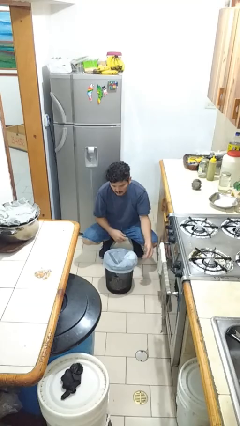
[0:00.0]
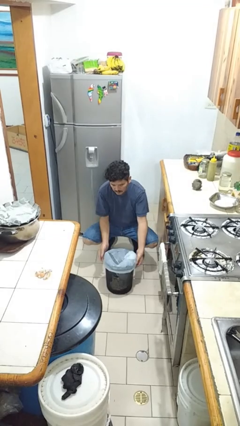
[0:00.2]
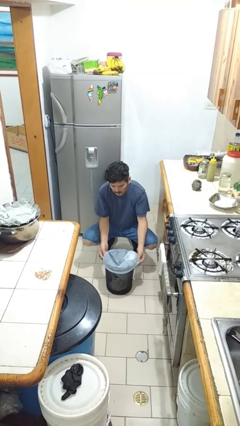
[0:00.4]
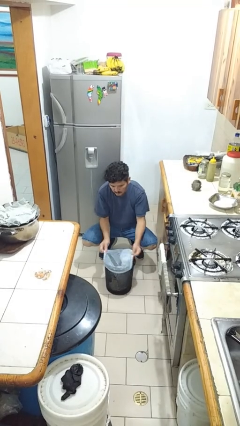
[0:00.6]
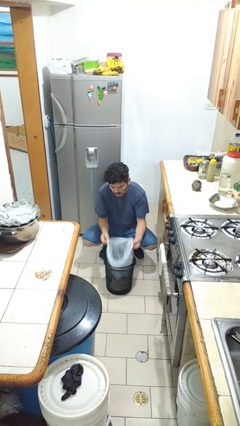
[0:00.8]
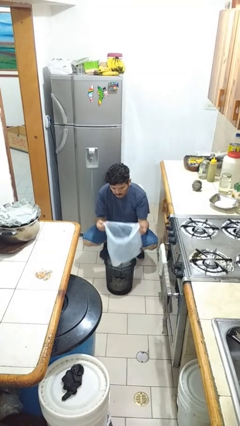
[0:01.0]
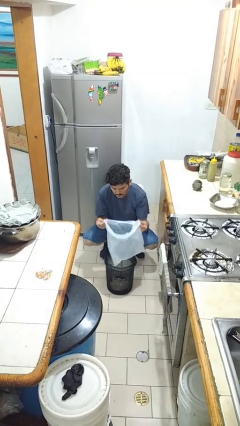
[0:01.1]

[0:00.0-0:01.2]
person removes trashbag from trashcan

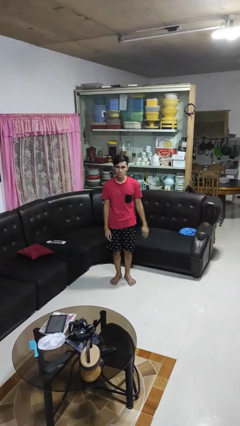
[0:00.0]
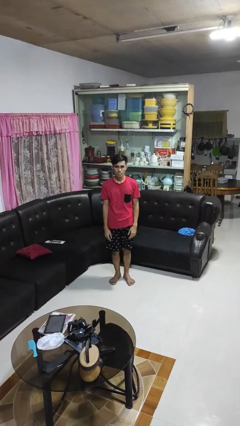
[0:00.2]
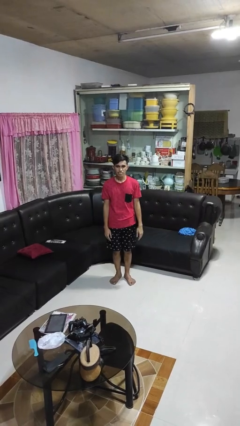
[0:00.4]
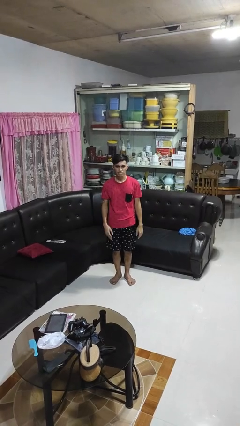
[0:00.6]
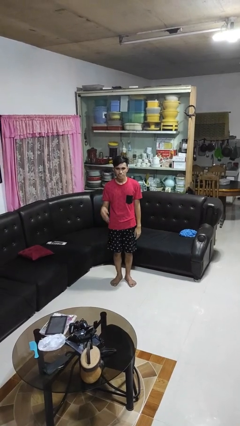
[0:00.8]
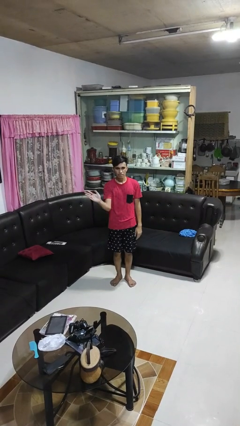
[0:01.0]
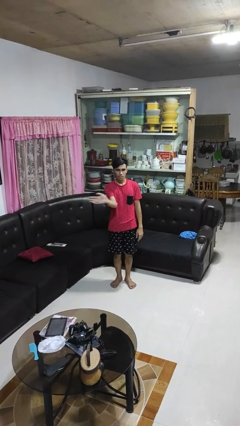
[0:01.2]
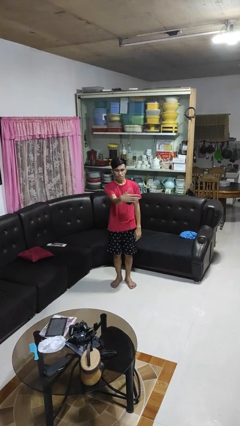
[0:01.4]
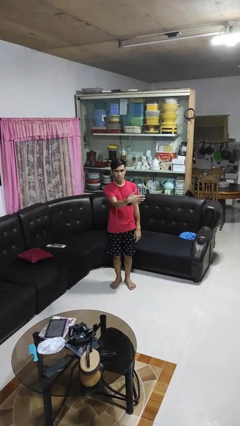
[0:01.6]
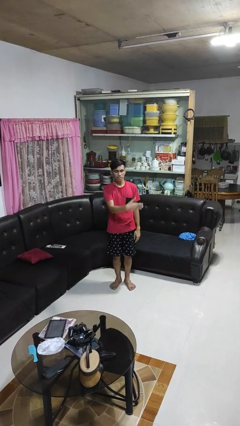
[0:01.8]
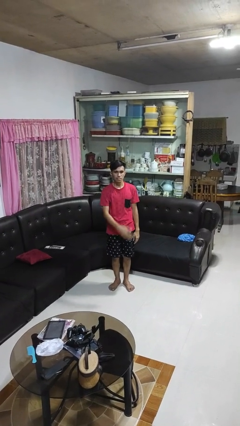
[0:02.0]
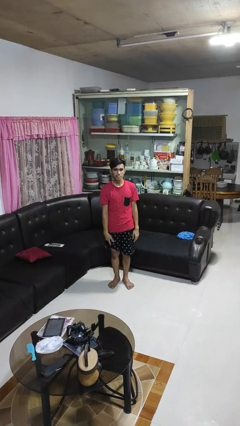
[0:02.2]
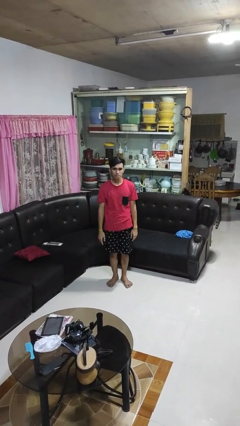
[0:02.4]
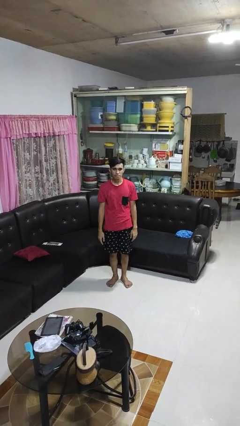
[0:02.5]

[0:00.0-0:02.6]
person gestures swipe left

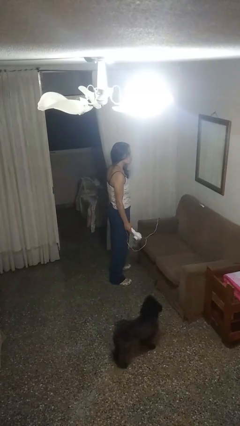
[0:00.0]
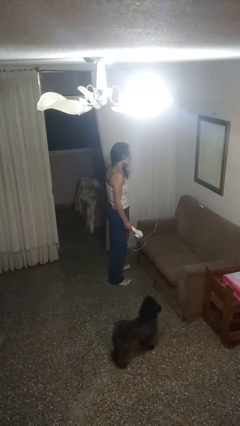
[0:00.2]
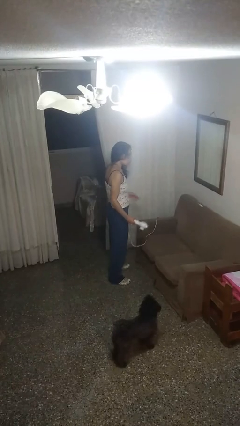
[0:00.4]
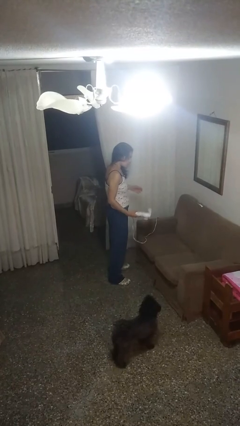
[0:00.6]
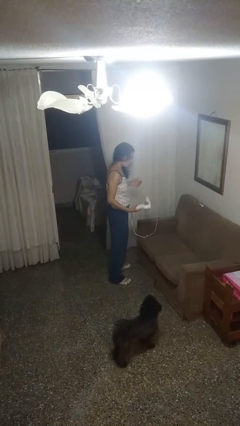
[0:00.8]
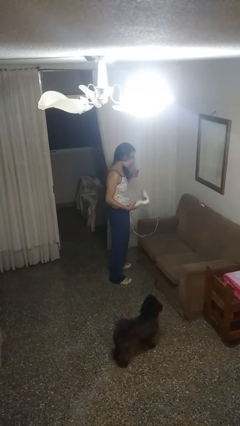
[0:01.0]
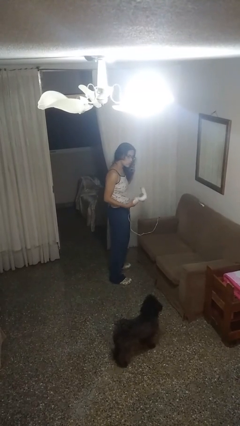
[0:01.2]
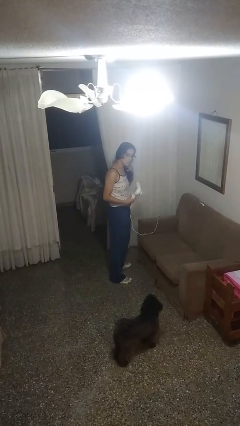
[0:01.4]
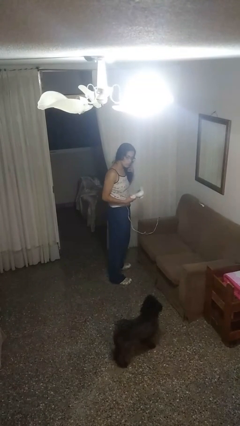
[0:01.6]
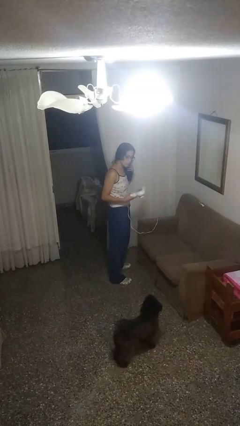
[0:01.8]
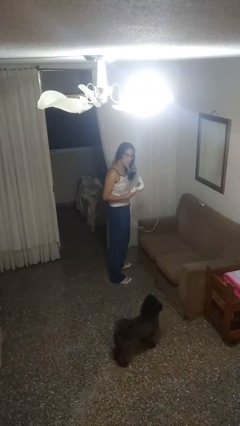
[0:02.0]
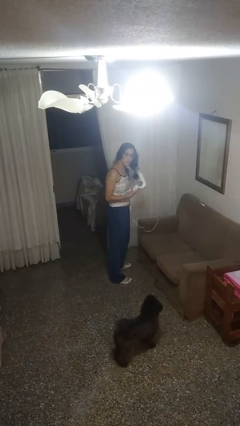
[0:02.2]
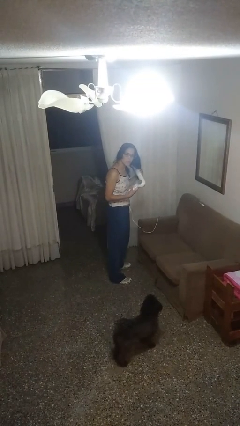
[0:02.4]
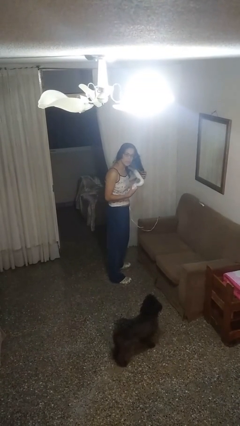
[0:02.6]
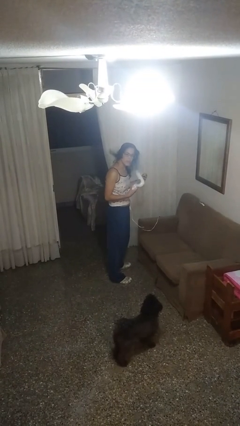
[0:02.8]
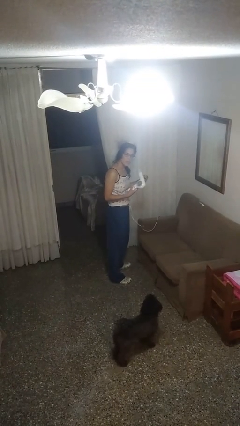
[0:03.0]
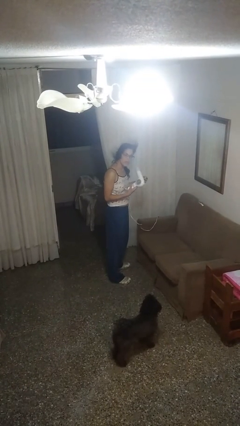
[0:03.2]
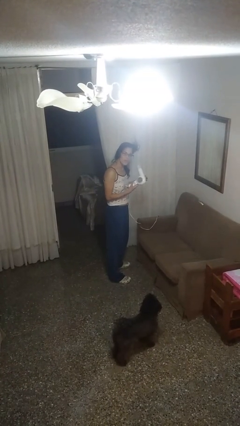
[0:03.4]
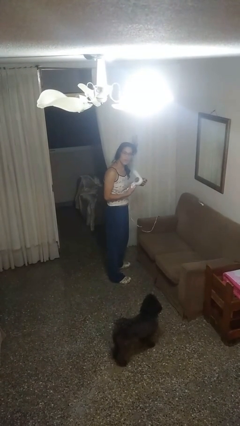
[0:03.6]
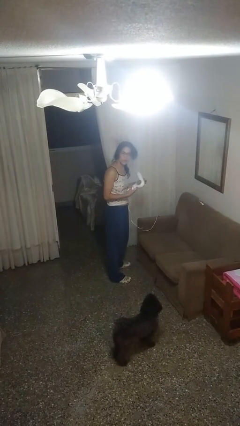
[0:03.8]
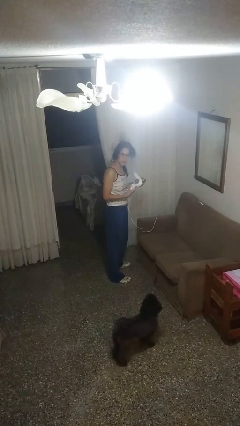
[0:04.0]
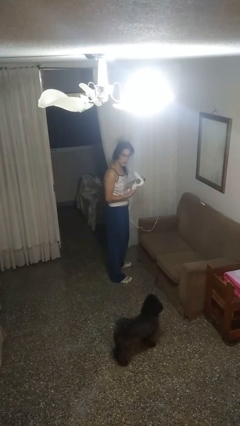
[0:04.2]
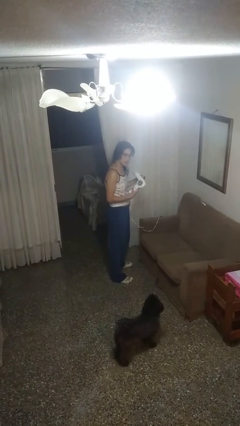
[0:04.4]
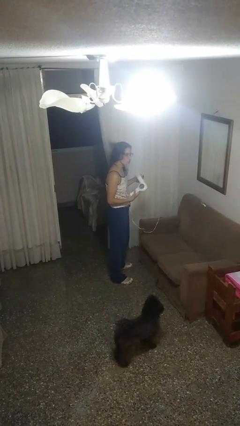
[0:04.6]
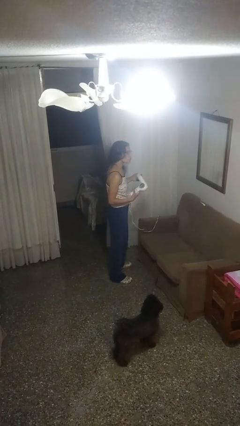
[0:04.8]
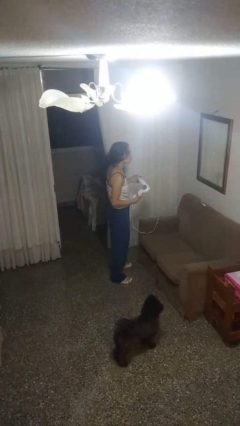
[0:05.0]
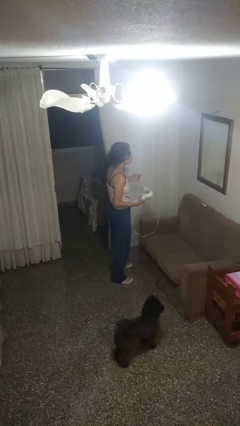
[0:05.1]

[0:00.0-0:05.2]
person dries hair with hairdryer

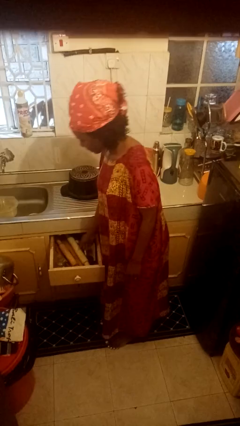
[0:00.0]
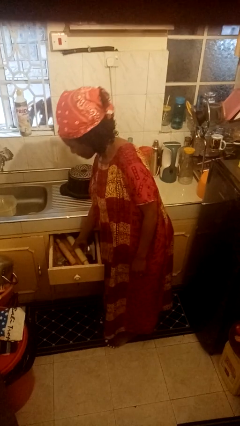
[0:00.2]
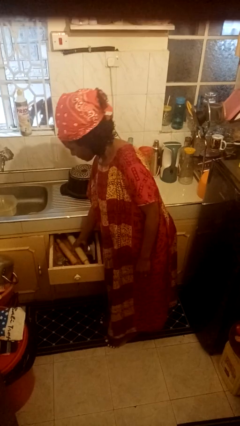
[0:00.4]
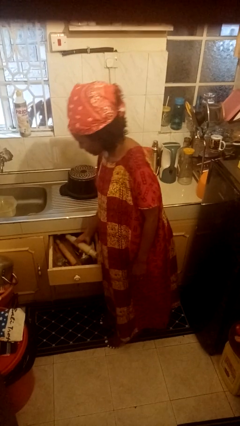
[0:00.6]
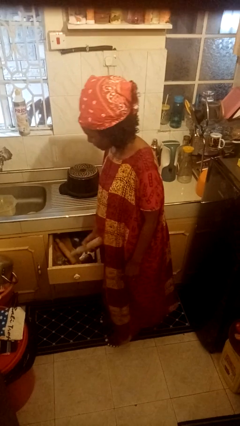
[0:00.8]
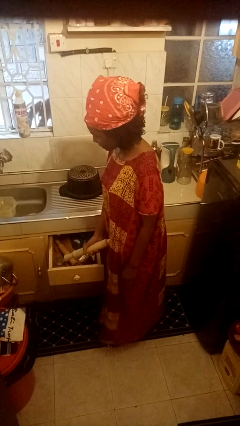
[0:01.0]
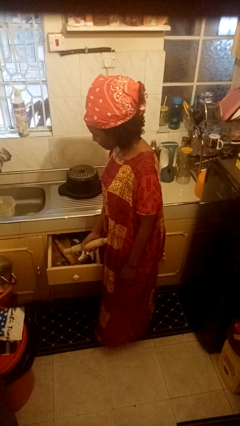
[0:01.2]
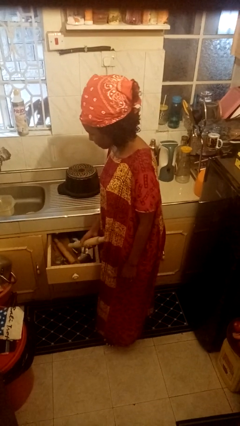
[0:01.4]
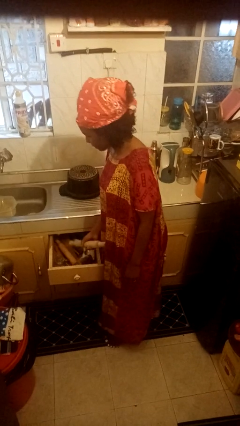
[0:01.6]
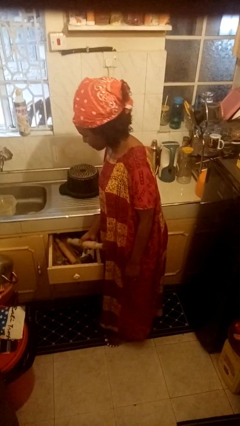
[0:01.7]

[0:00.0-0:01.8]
person takes object from kitchen drawer

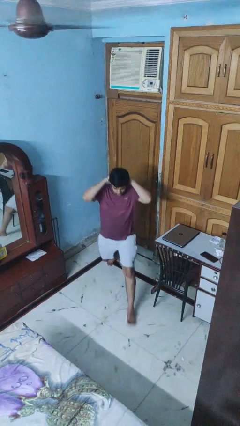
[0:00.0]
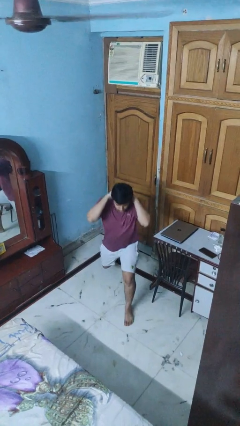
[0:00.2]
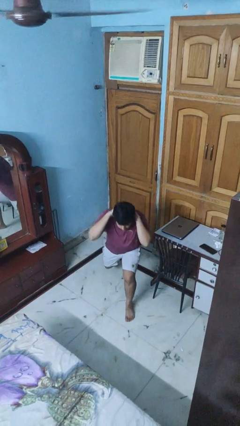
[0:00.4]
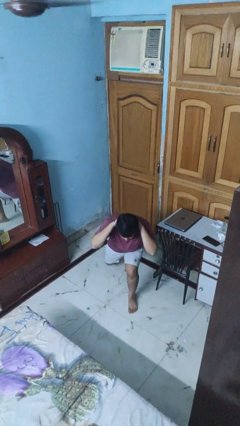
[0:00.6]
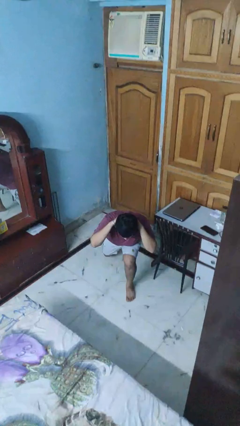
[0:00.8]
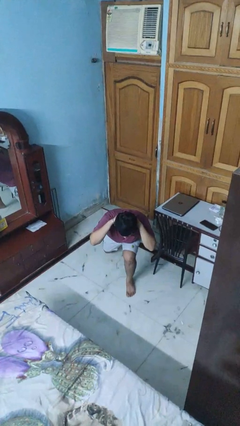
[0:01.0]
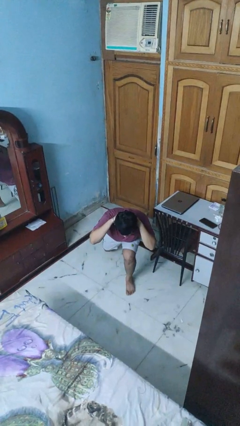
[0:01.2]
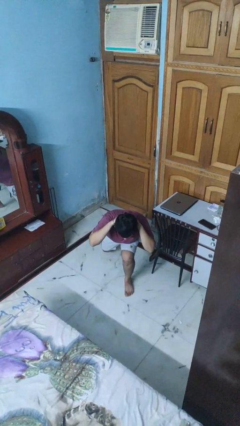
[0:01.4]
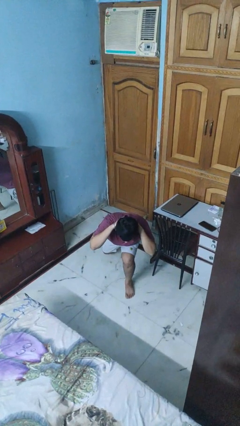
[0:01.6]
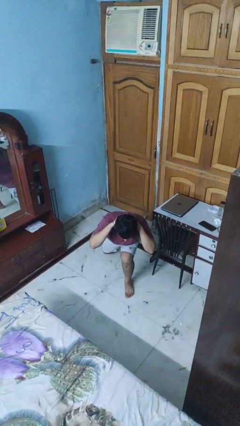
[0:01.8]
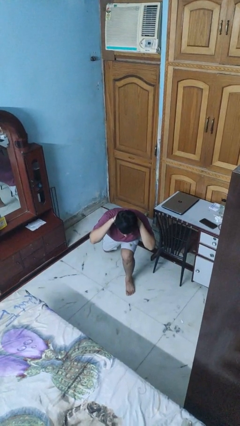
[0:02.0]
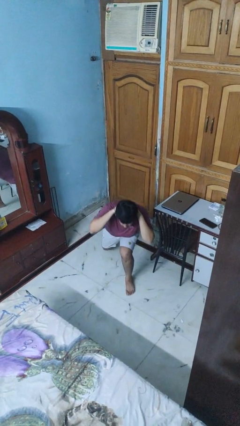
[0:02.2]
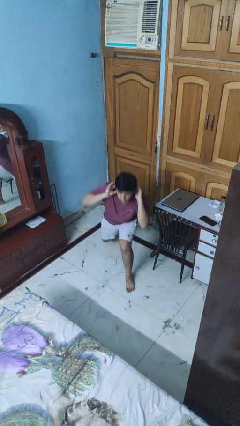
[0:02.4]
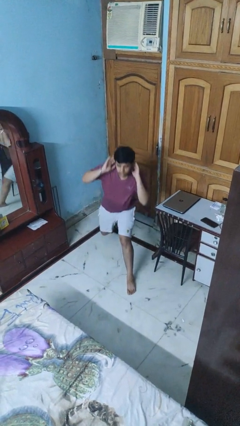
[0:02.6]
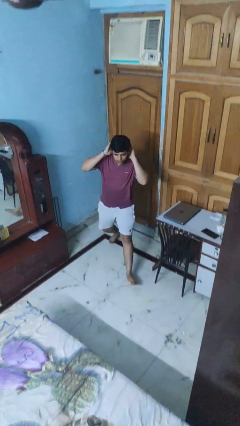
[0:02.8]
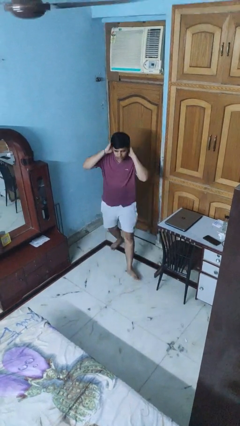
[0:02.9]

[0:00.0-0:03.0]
person exercises with lunges

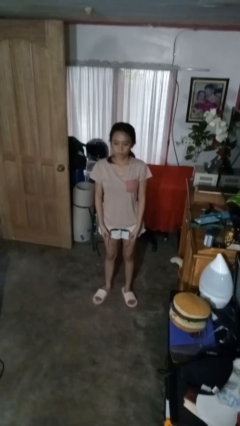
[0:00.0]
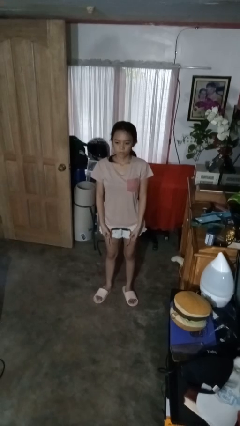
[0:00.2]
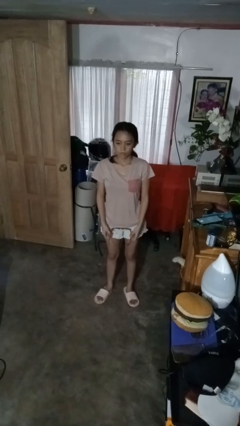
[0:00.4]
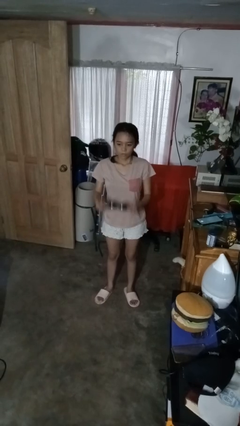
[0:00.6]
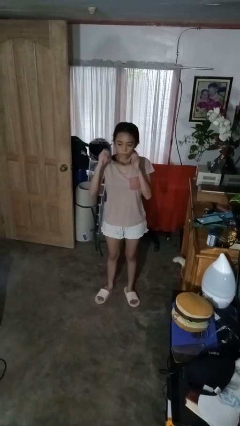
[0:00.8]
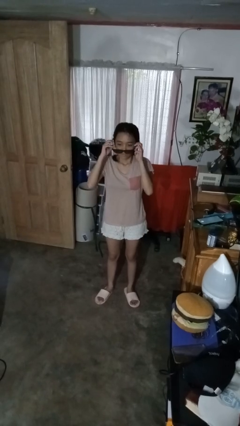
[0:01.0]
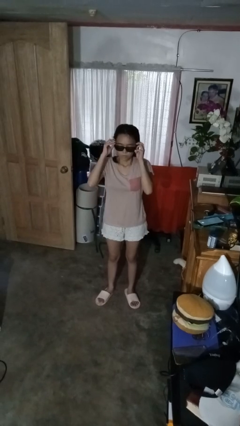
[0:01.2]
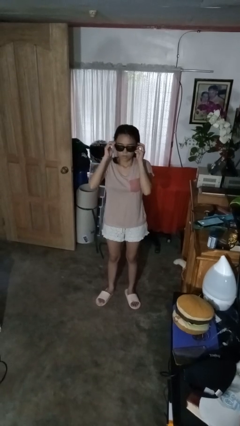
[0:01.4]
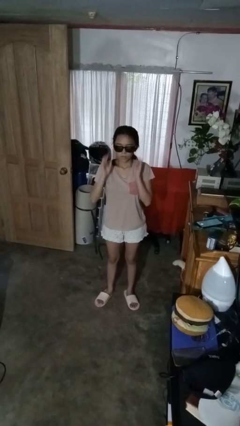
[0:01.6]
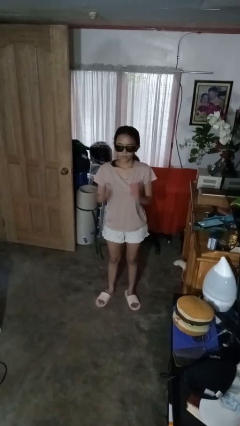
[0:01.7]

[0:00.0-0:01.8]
person puts on sunglasses

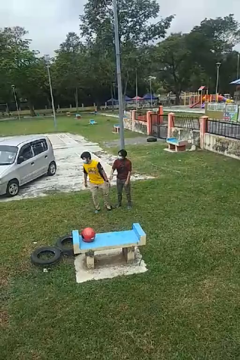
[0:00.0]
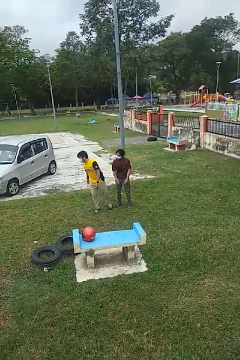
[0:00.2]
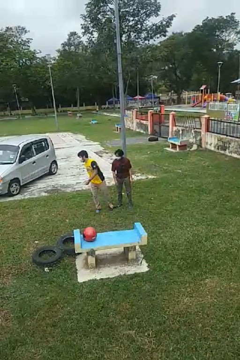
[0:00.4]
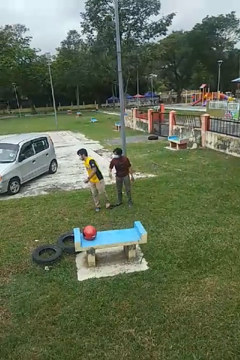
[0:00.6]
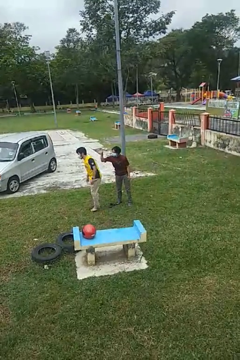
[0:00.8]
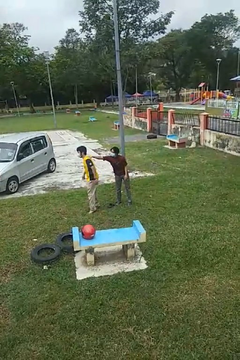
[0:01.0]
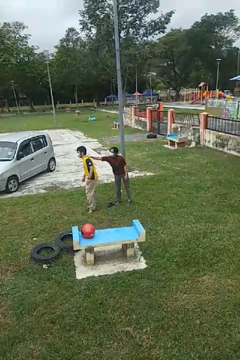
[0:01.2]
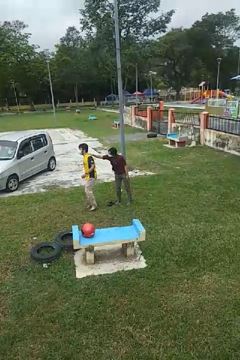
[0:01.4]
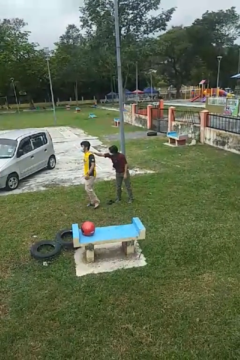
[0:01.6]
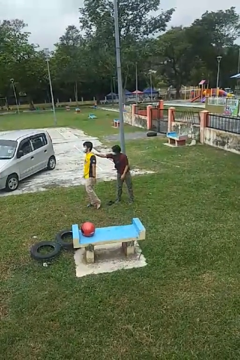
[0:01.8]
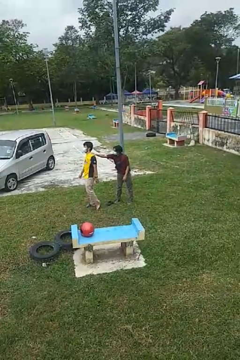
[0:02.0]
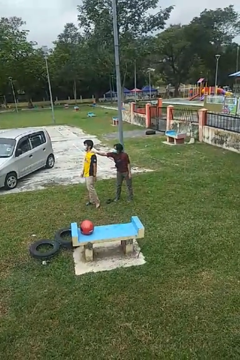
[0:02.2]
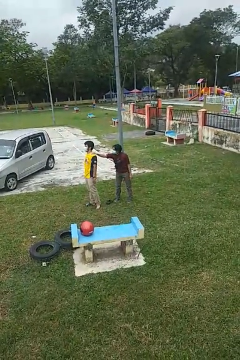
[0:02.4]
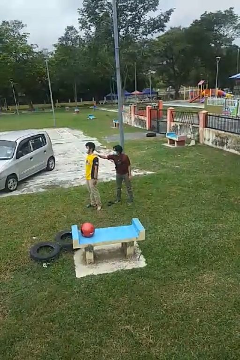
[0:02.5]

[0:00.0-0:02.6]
person grabs person by shoulder
